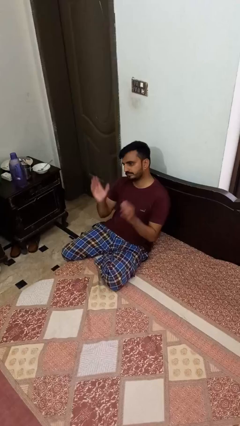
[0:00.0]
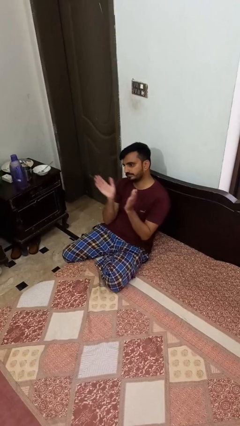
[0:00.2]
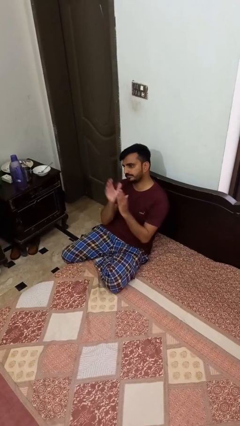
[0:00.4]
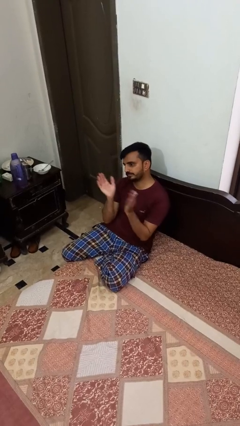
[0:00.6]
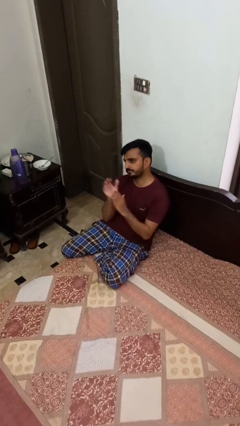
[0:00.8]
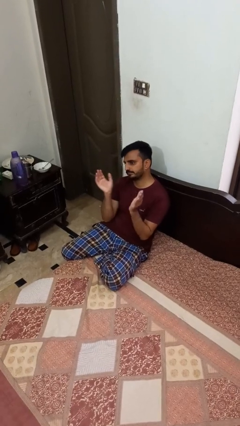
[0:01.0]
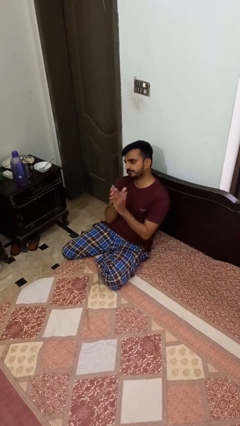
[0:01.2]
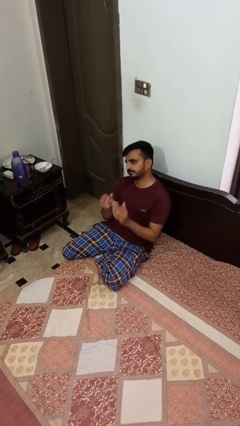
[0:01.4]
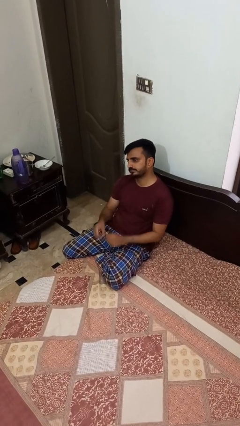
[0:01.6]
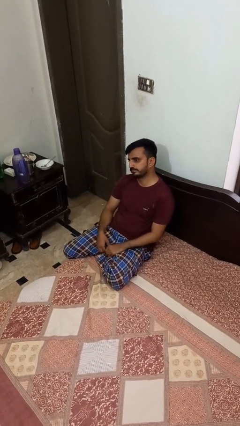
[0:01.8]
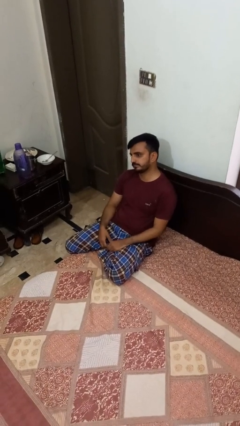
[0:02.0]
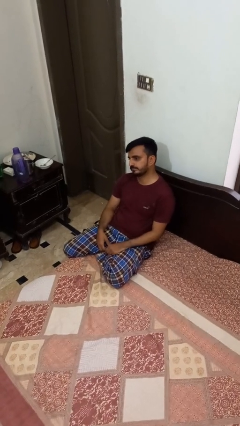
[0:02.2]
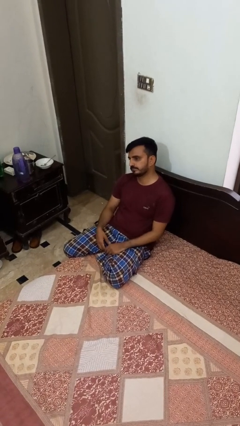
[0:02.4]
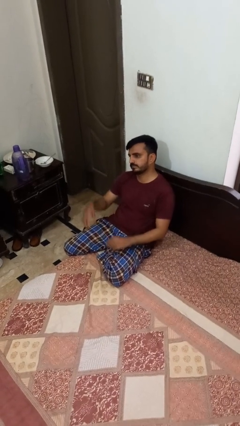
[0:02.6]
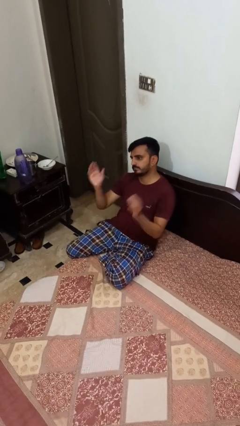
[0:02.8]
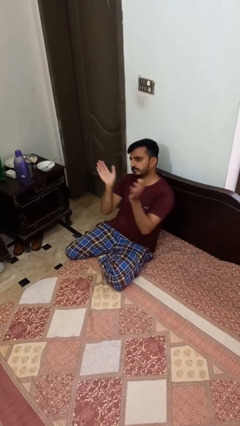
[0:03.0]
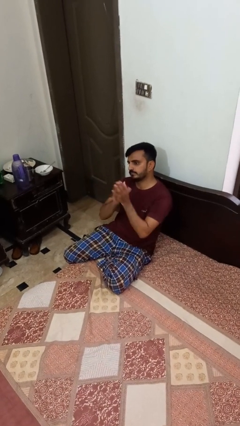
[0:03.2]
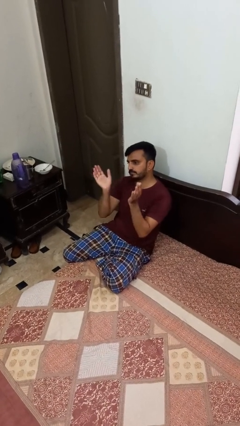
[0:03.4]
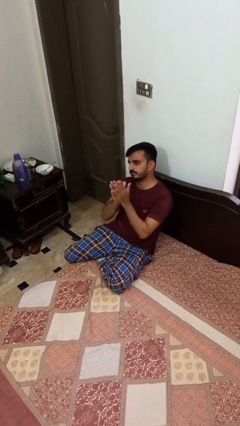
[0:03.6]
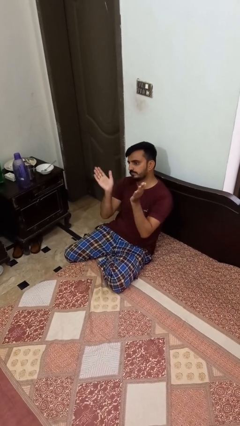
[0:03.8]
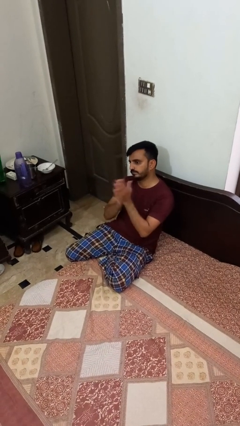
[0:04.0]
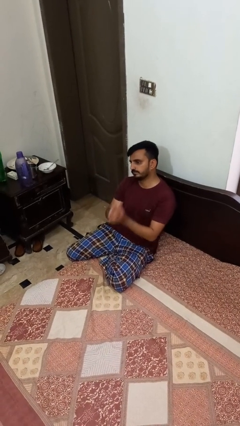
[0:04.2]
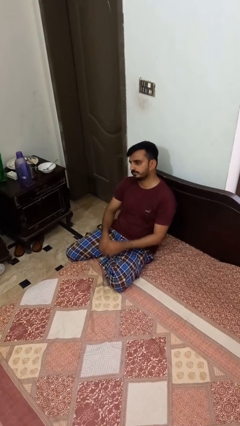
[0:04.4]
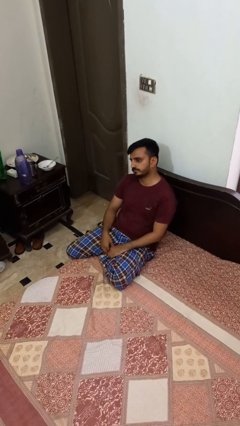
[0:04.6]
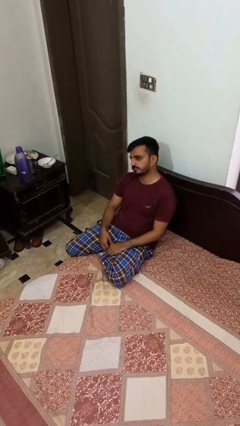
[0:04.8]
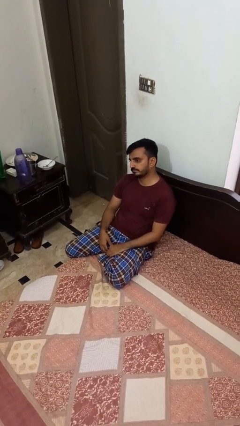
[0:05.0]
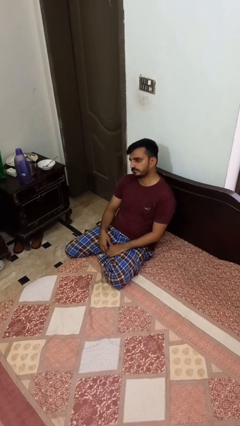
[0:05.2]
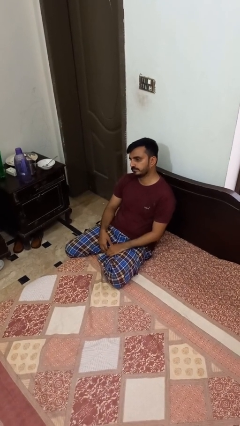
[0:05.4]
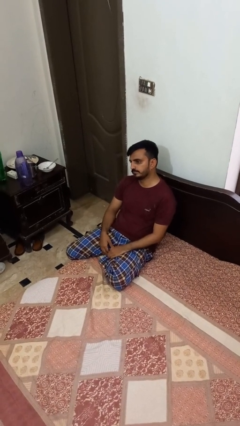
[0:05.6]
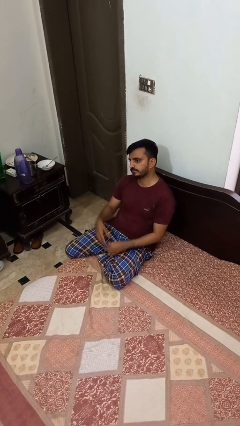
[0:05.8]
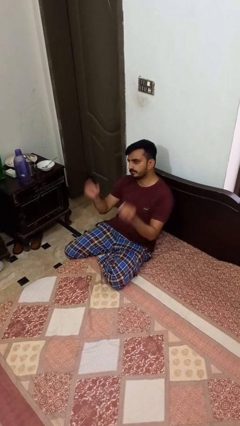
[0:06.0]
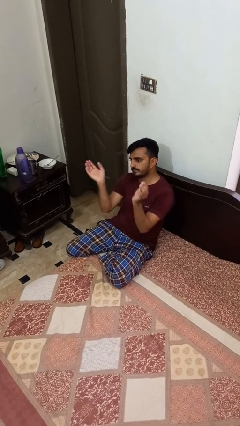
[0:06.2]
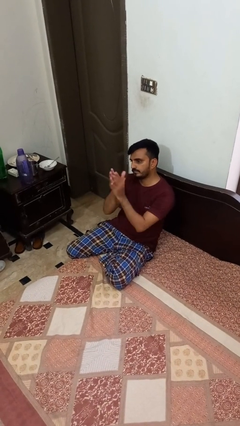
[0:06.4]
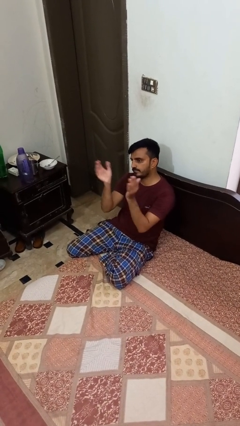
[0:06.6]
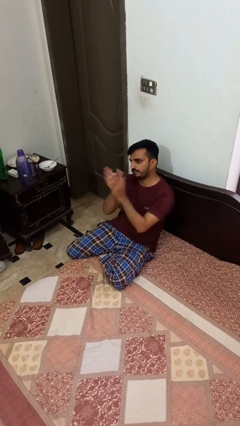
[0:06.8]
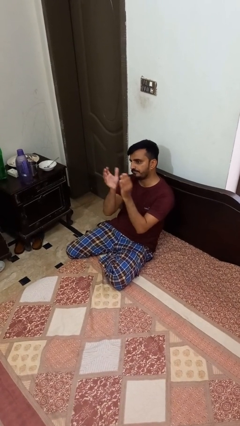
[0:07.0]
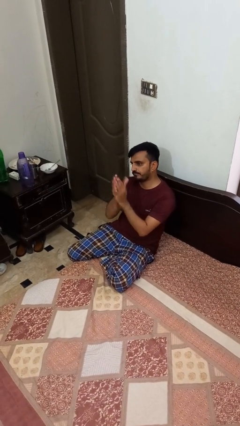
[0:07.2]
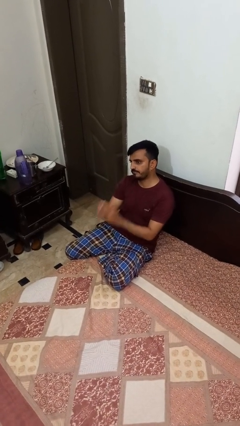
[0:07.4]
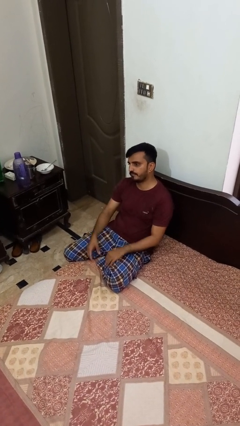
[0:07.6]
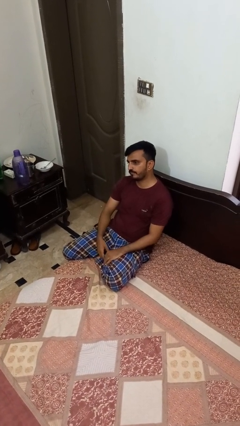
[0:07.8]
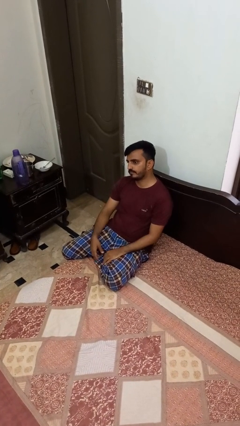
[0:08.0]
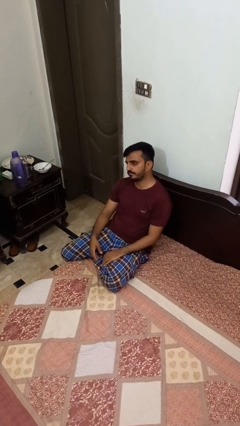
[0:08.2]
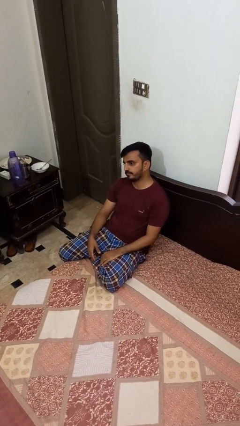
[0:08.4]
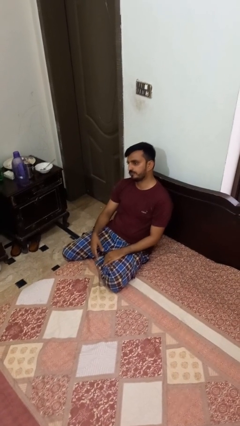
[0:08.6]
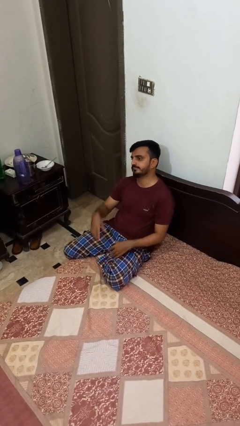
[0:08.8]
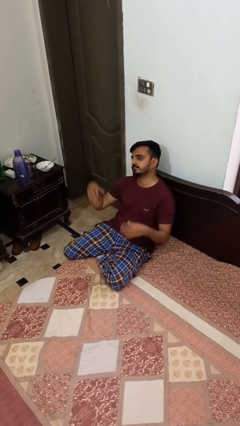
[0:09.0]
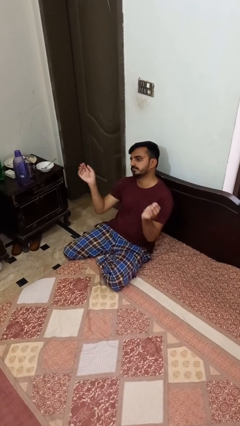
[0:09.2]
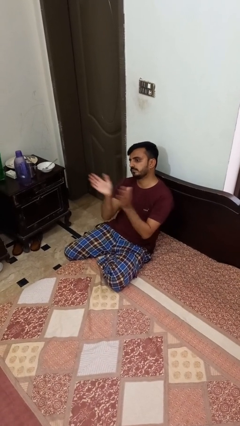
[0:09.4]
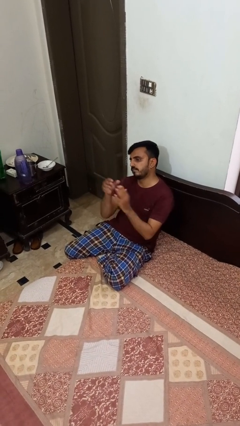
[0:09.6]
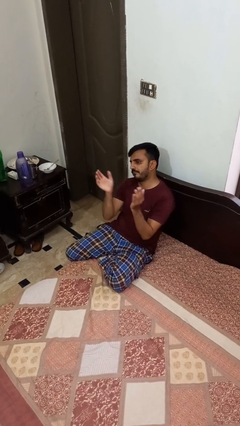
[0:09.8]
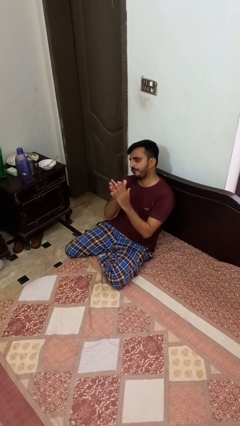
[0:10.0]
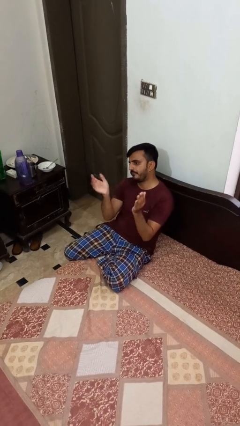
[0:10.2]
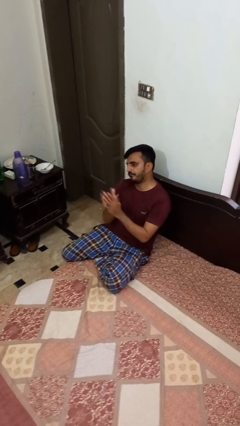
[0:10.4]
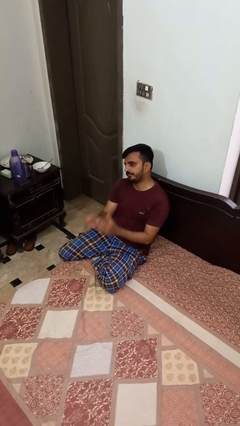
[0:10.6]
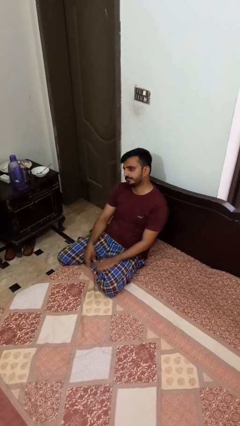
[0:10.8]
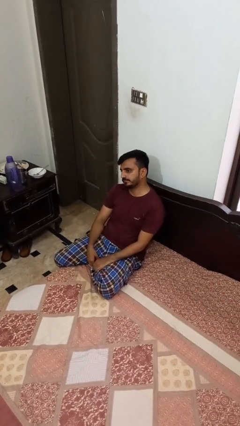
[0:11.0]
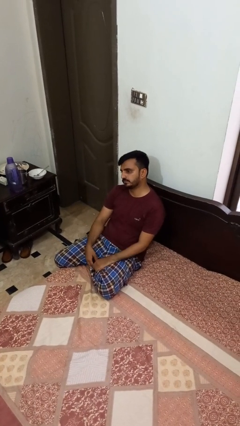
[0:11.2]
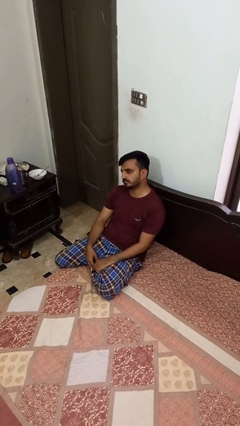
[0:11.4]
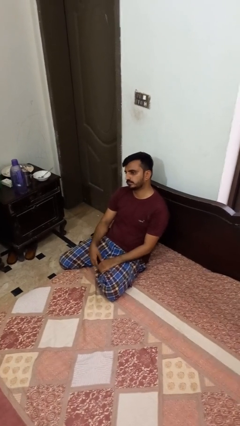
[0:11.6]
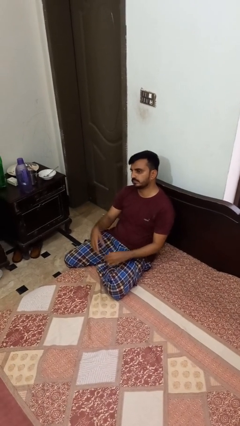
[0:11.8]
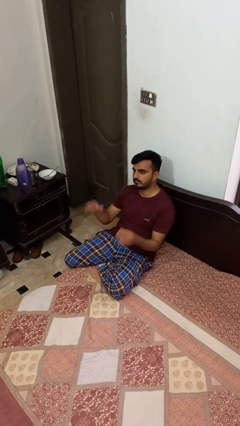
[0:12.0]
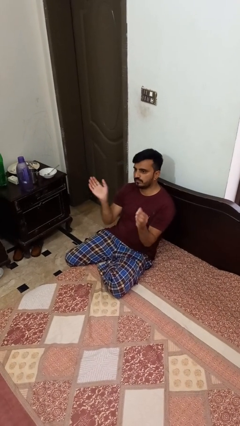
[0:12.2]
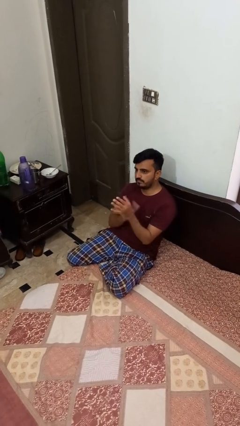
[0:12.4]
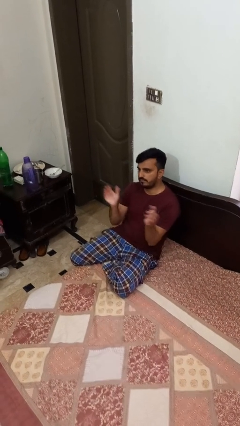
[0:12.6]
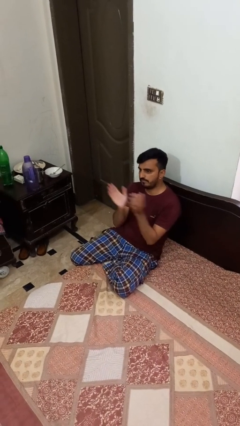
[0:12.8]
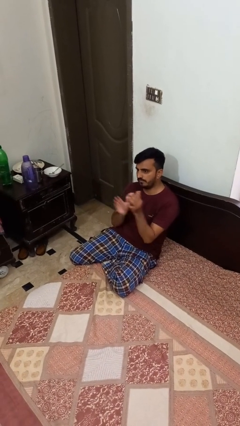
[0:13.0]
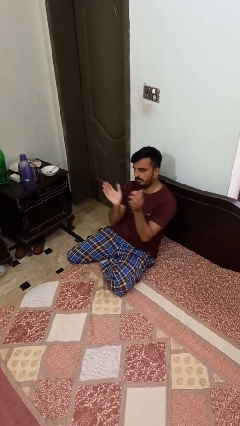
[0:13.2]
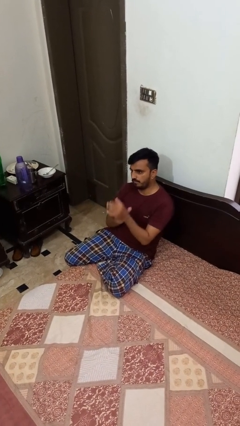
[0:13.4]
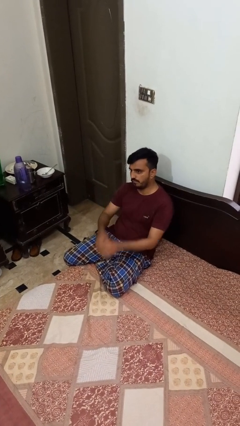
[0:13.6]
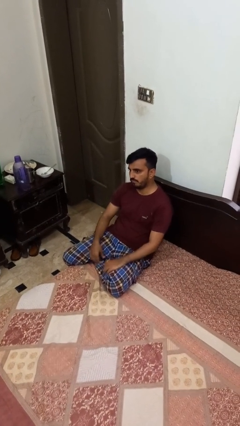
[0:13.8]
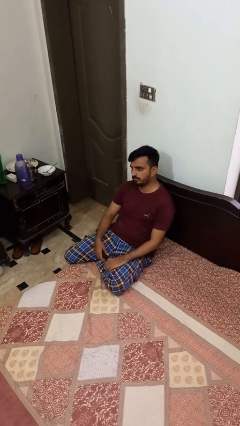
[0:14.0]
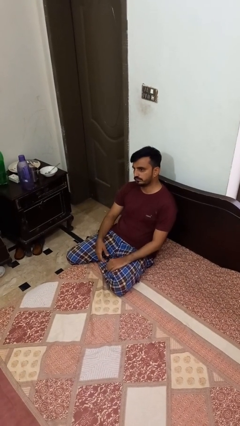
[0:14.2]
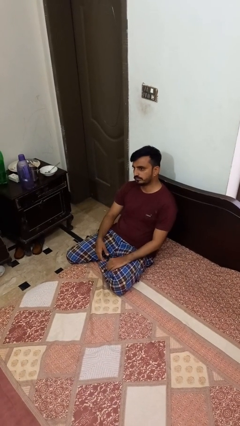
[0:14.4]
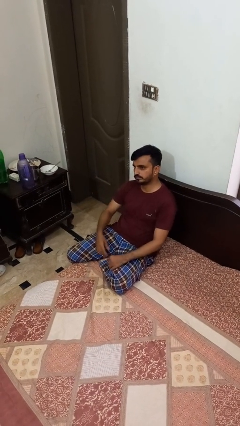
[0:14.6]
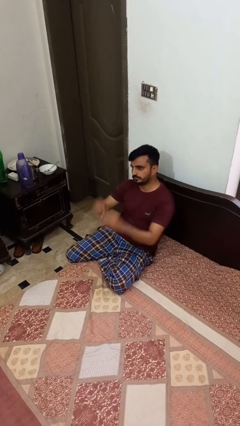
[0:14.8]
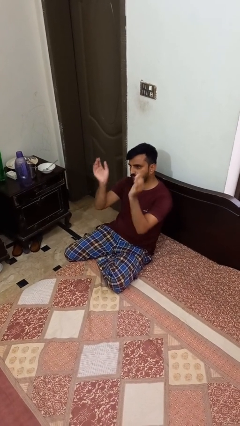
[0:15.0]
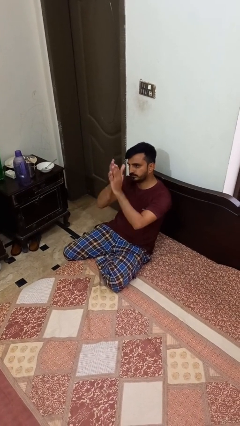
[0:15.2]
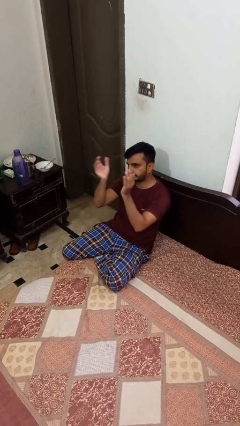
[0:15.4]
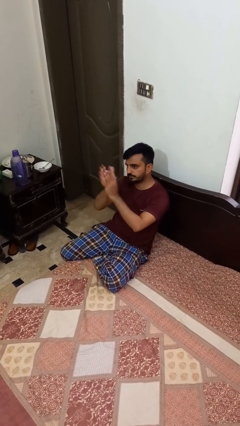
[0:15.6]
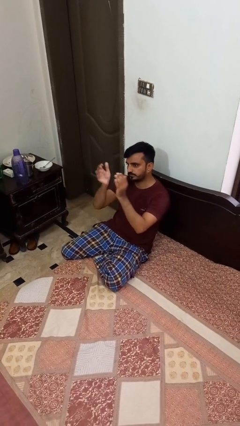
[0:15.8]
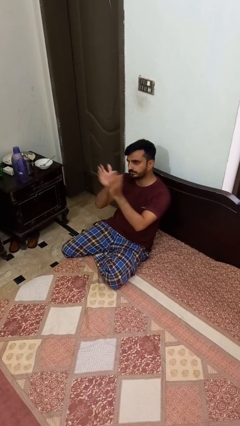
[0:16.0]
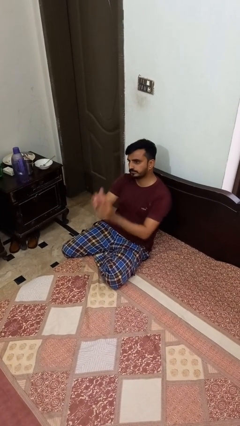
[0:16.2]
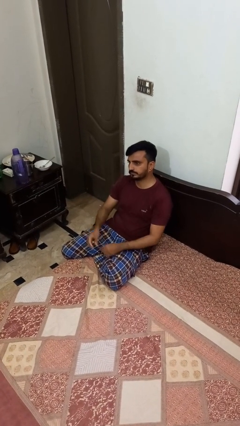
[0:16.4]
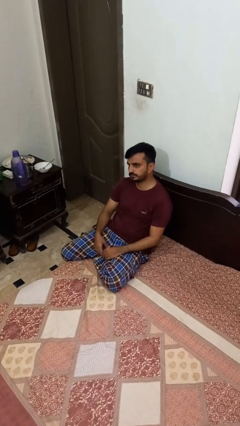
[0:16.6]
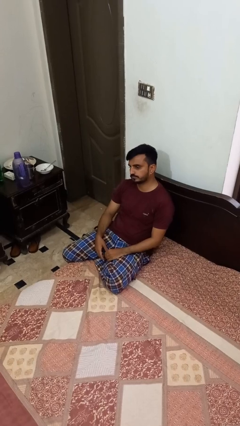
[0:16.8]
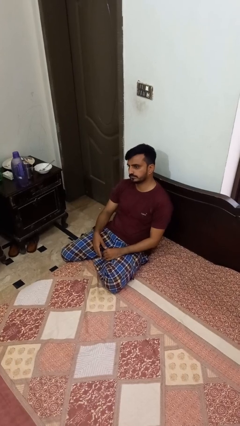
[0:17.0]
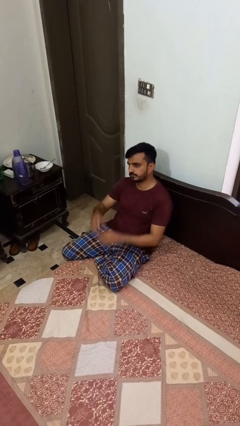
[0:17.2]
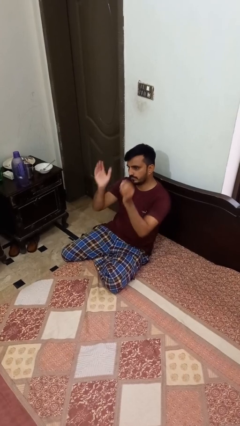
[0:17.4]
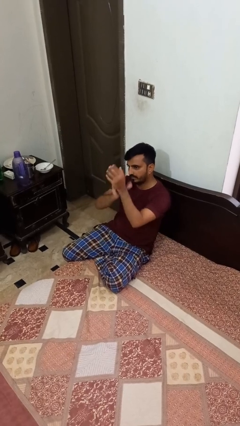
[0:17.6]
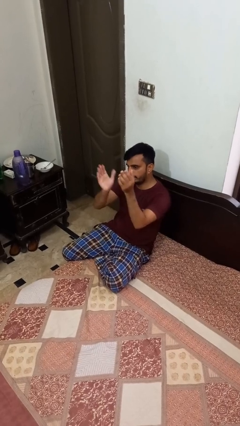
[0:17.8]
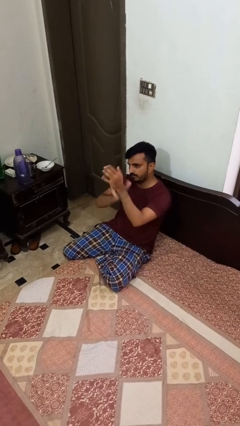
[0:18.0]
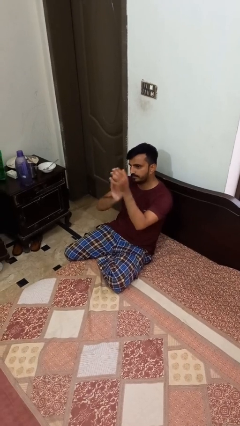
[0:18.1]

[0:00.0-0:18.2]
person claps hands
